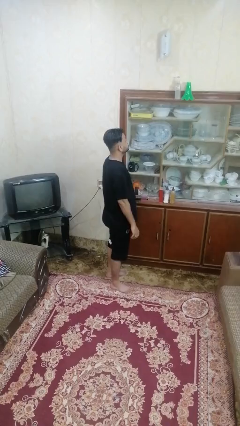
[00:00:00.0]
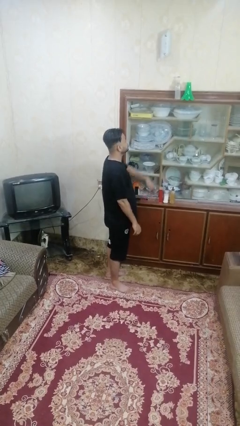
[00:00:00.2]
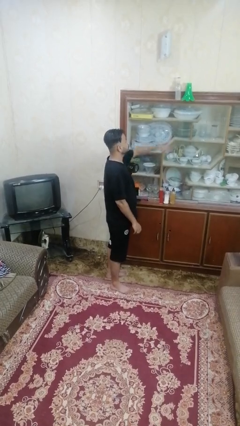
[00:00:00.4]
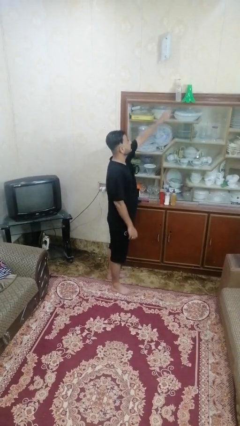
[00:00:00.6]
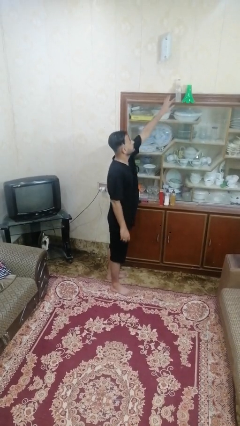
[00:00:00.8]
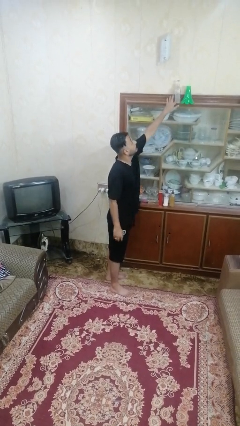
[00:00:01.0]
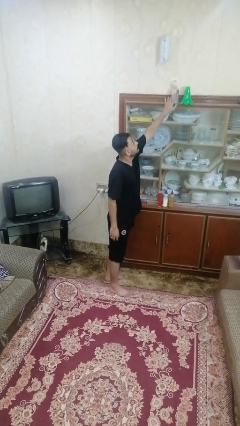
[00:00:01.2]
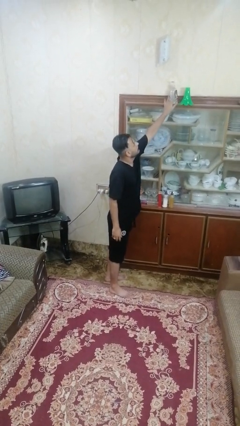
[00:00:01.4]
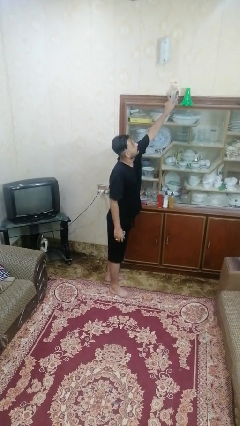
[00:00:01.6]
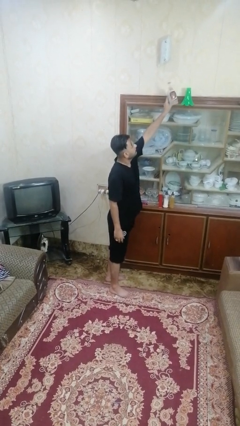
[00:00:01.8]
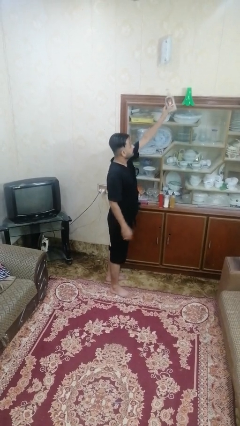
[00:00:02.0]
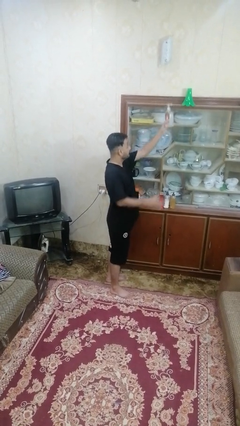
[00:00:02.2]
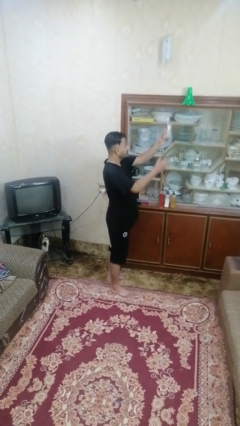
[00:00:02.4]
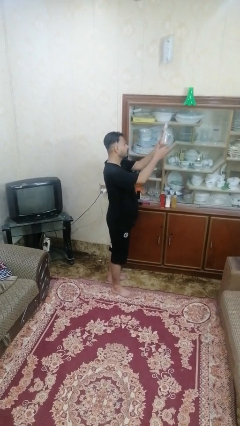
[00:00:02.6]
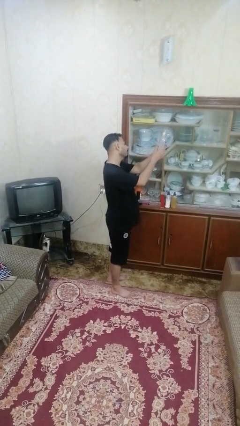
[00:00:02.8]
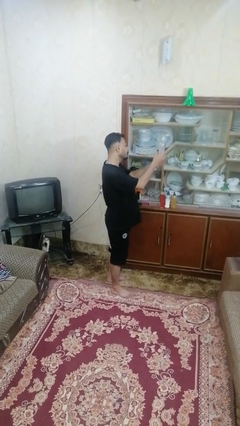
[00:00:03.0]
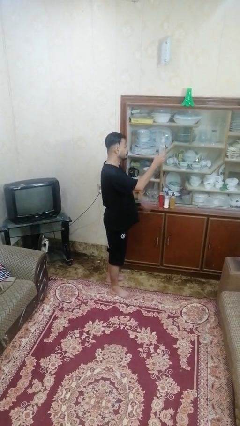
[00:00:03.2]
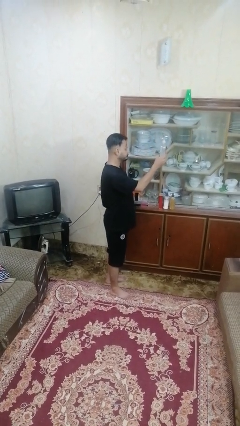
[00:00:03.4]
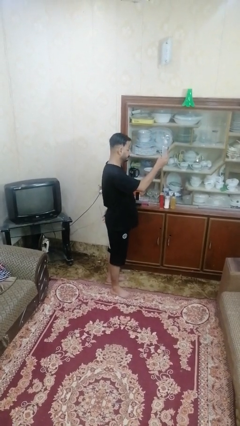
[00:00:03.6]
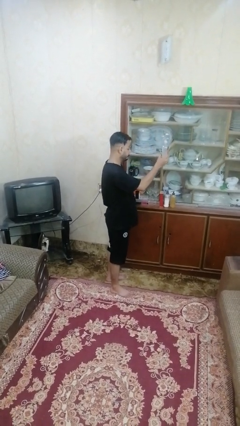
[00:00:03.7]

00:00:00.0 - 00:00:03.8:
person picks up object from shelf

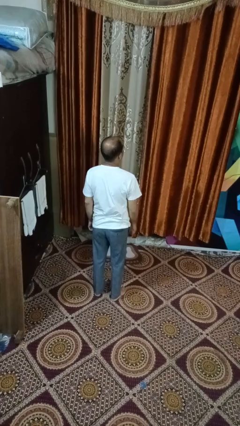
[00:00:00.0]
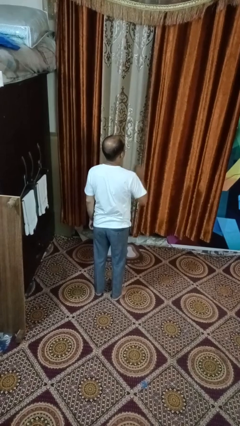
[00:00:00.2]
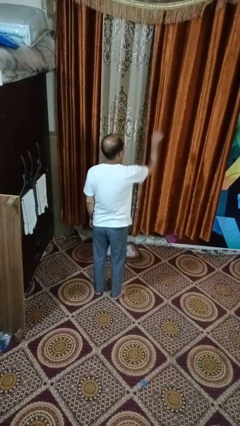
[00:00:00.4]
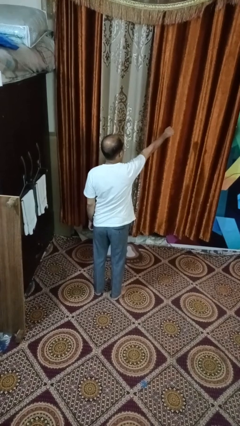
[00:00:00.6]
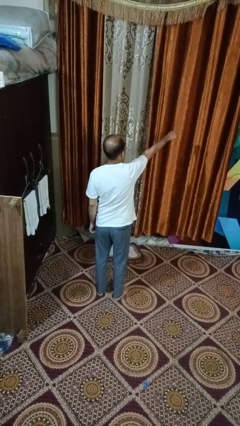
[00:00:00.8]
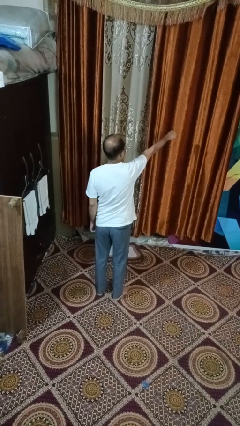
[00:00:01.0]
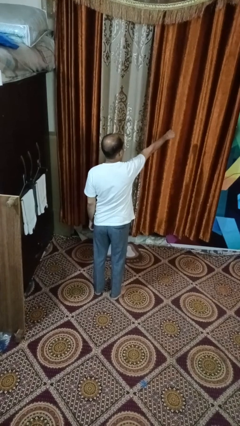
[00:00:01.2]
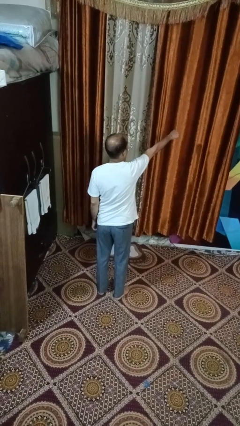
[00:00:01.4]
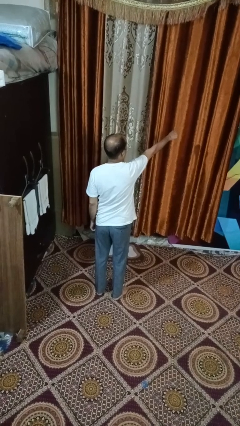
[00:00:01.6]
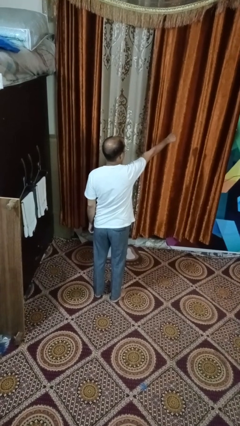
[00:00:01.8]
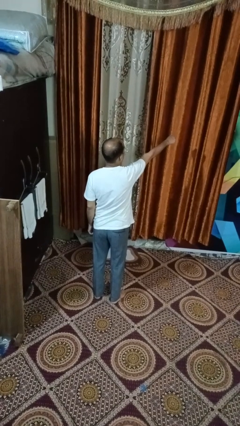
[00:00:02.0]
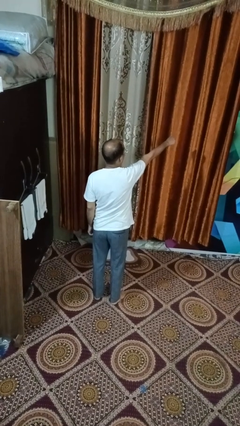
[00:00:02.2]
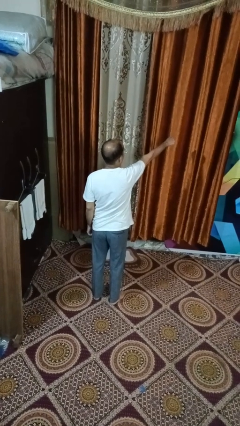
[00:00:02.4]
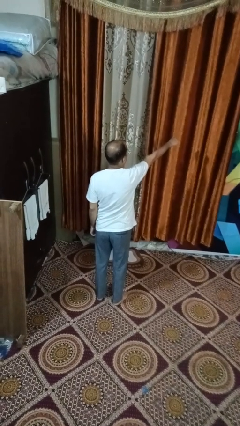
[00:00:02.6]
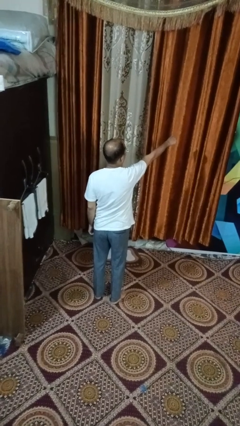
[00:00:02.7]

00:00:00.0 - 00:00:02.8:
person punches

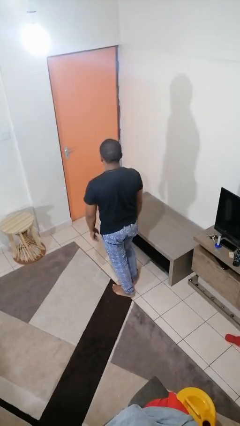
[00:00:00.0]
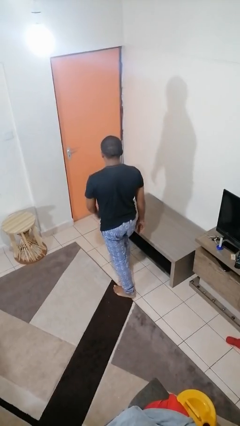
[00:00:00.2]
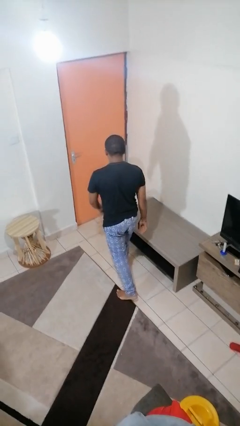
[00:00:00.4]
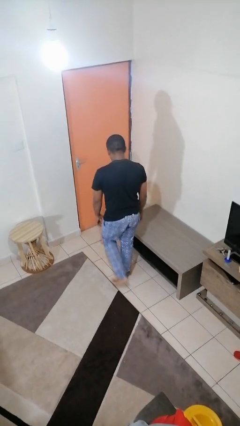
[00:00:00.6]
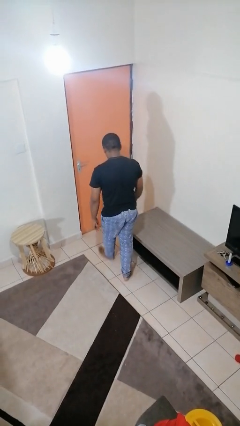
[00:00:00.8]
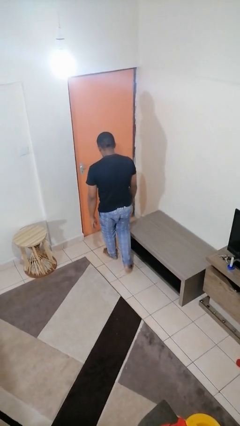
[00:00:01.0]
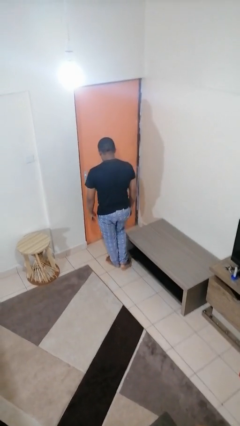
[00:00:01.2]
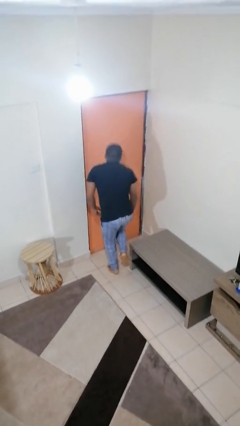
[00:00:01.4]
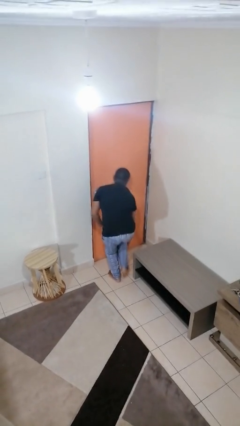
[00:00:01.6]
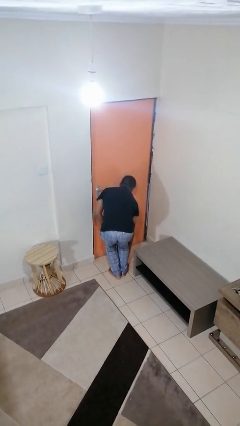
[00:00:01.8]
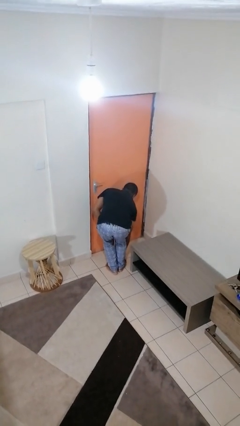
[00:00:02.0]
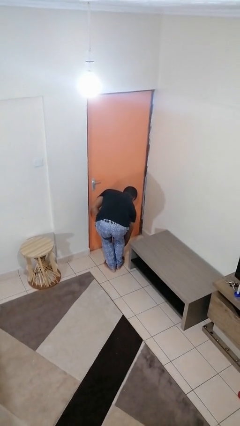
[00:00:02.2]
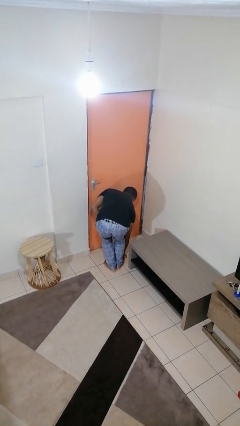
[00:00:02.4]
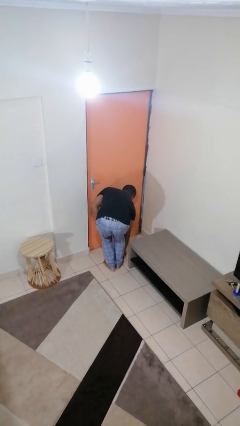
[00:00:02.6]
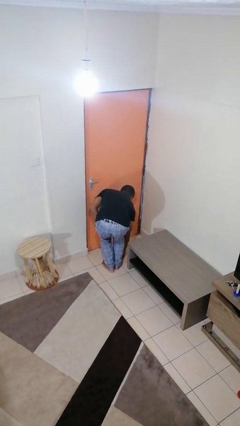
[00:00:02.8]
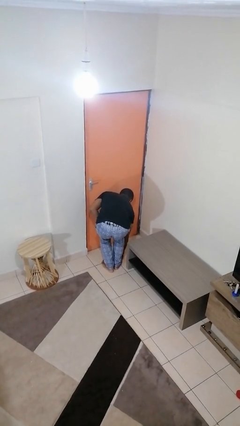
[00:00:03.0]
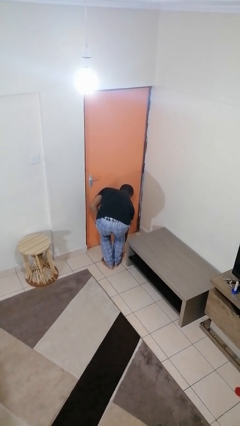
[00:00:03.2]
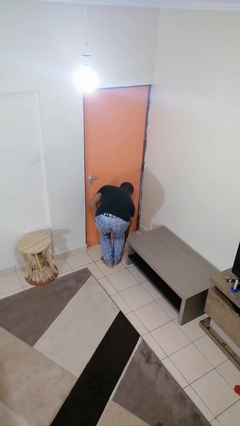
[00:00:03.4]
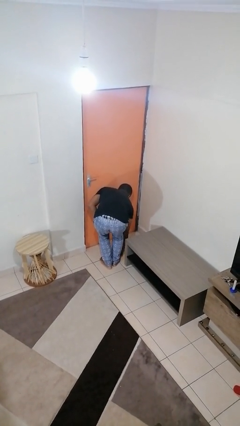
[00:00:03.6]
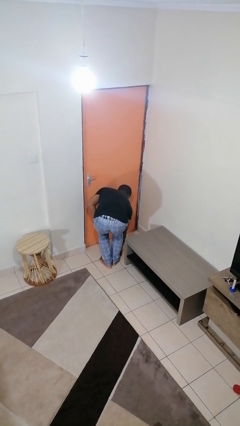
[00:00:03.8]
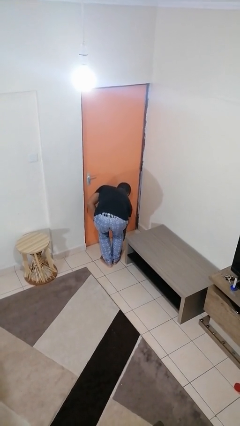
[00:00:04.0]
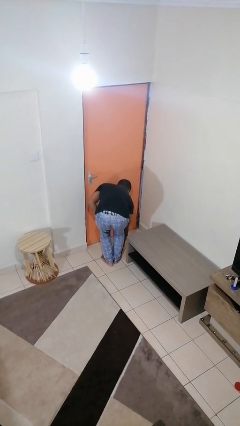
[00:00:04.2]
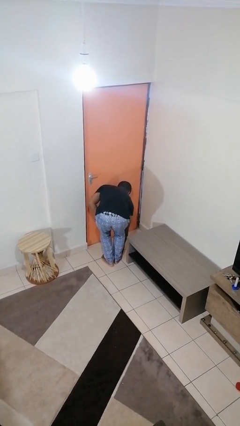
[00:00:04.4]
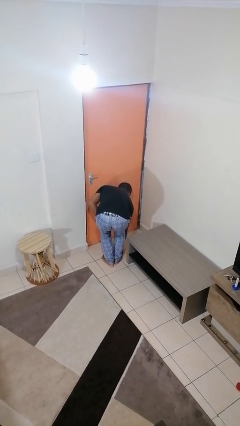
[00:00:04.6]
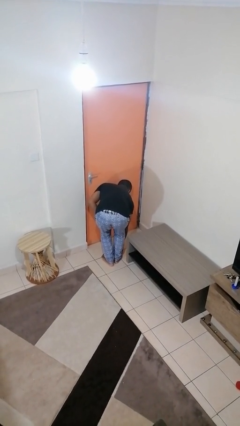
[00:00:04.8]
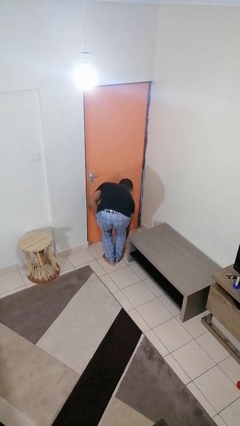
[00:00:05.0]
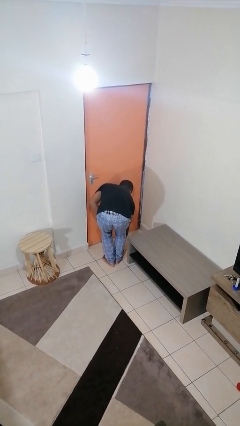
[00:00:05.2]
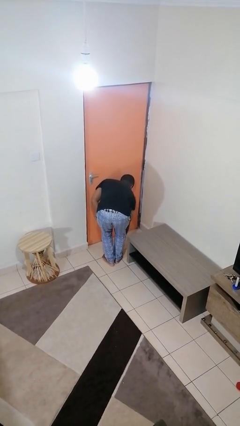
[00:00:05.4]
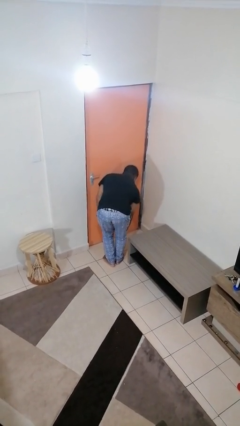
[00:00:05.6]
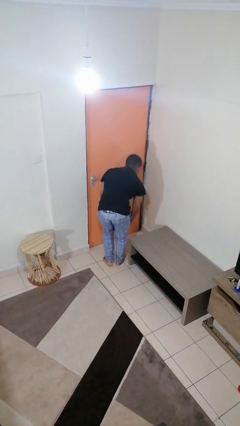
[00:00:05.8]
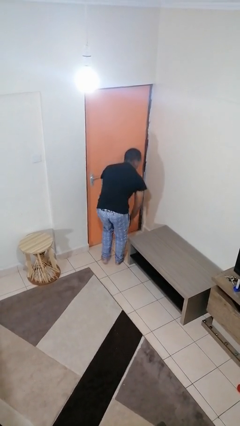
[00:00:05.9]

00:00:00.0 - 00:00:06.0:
person stubs toe

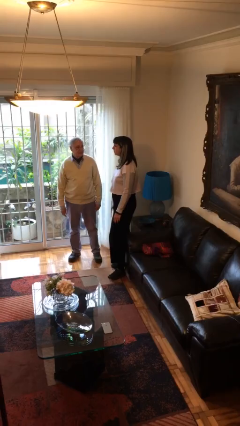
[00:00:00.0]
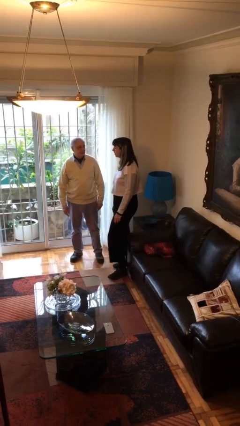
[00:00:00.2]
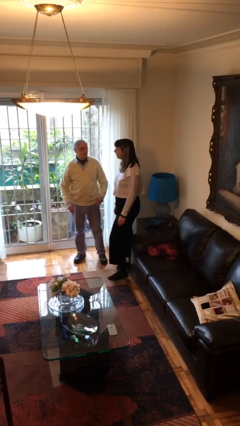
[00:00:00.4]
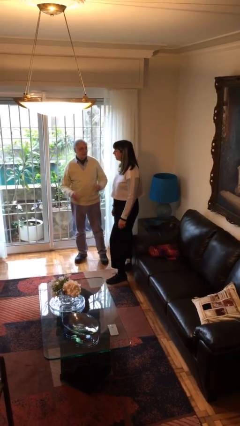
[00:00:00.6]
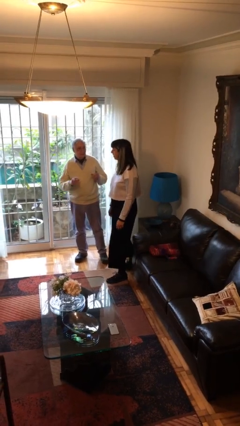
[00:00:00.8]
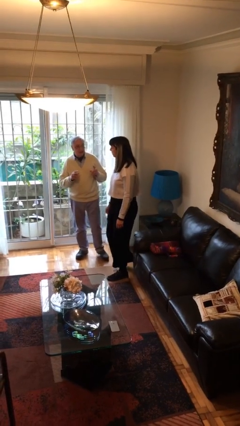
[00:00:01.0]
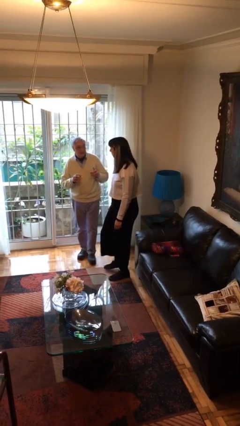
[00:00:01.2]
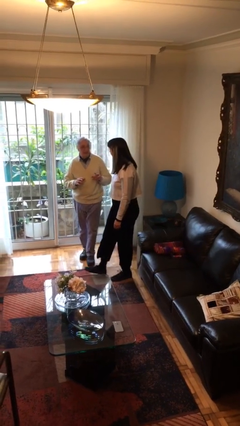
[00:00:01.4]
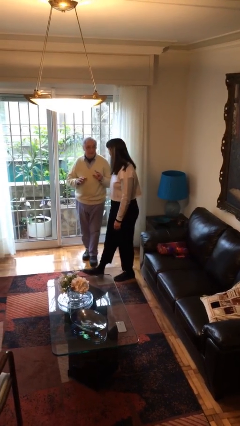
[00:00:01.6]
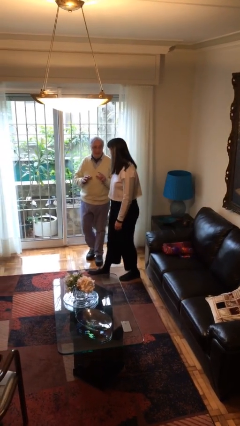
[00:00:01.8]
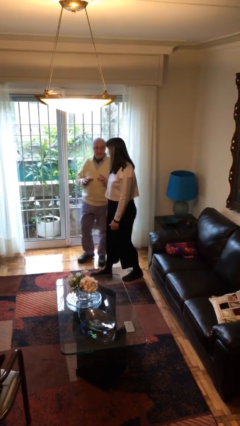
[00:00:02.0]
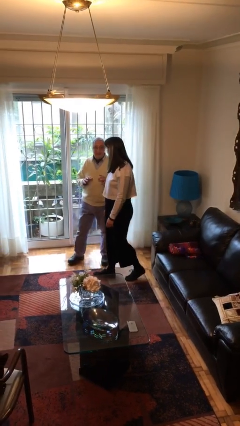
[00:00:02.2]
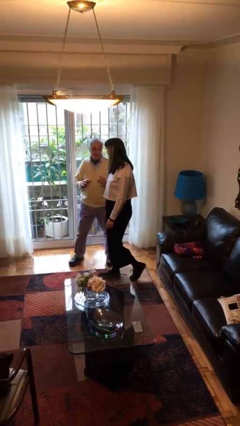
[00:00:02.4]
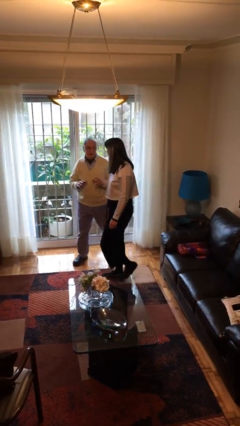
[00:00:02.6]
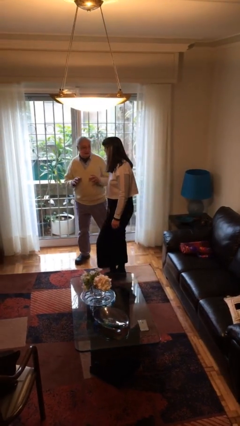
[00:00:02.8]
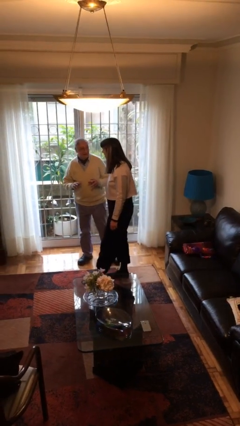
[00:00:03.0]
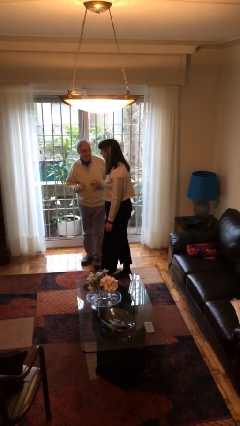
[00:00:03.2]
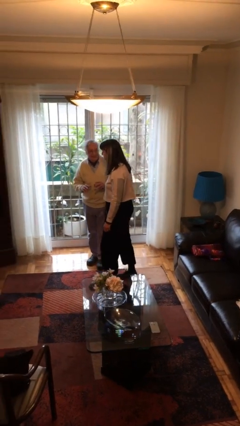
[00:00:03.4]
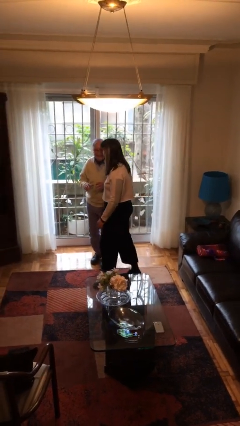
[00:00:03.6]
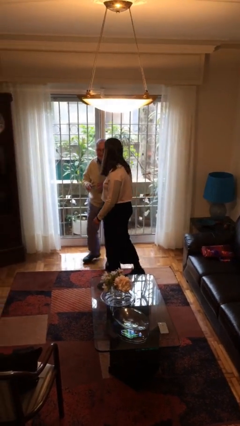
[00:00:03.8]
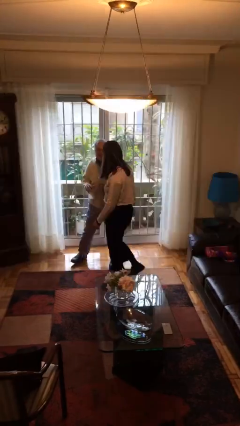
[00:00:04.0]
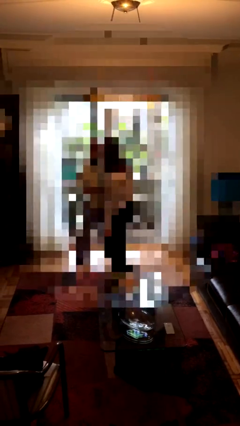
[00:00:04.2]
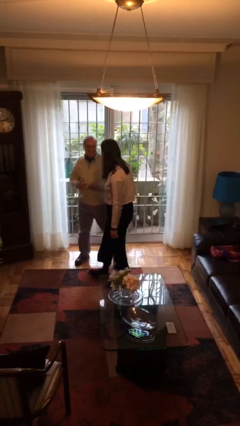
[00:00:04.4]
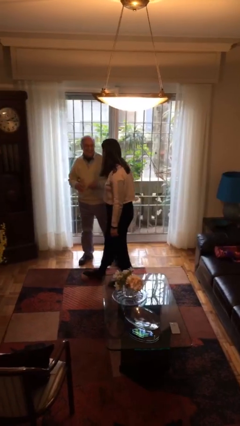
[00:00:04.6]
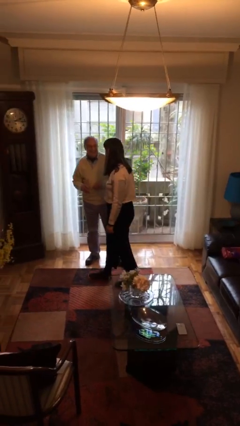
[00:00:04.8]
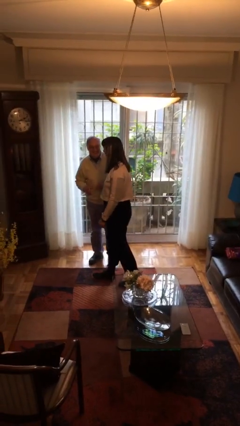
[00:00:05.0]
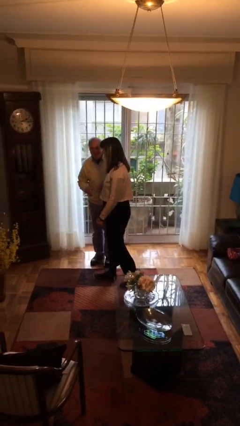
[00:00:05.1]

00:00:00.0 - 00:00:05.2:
person talks to person
